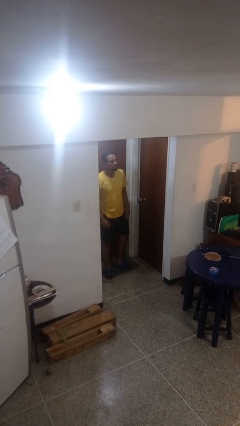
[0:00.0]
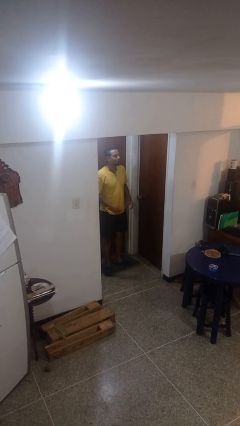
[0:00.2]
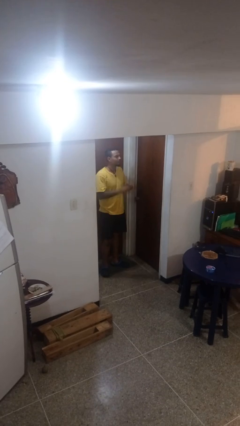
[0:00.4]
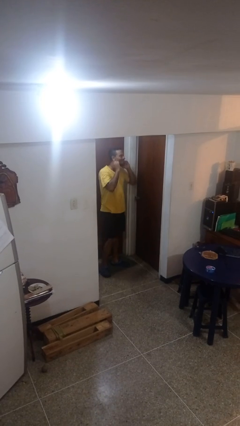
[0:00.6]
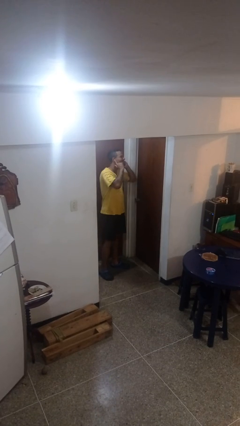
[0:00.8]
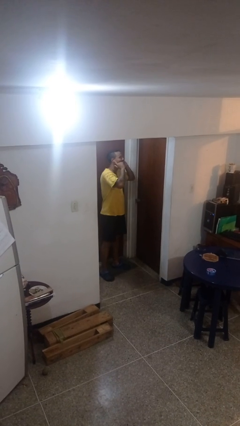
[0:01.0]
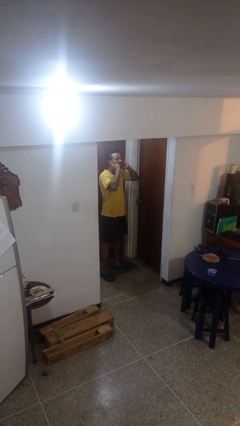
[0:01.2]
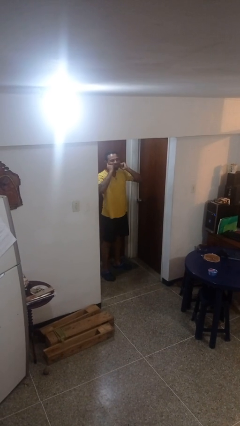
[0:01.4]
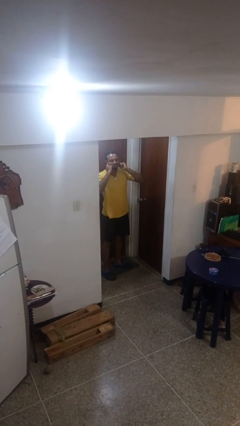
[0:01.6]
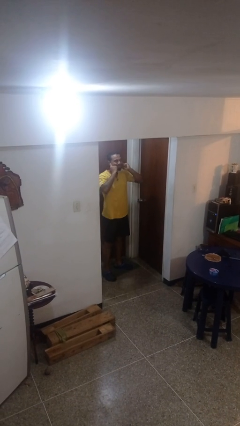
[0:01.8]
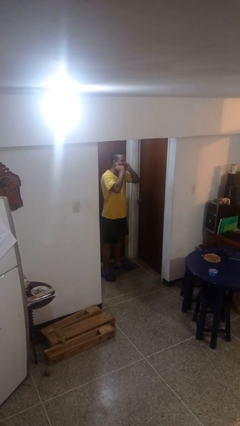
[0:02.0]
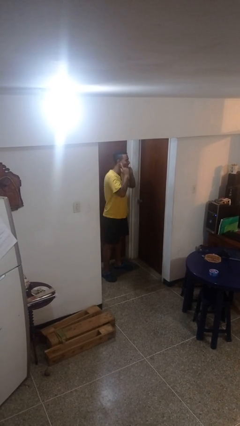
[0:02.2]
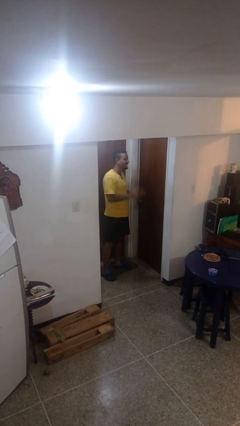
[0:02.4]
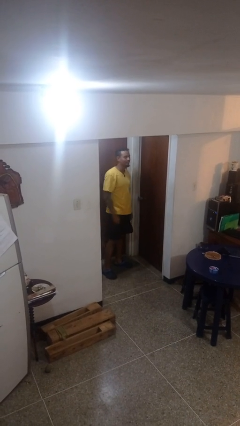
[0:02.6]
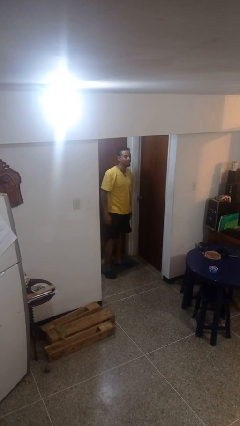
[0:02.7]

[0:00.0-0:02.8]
person puts fingers in ear

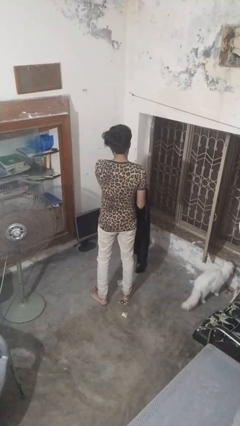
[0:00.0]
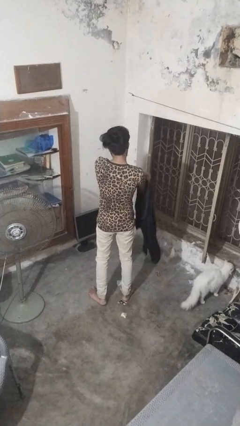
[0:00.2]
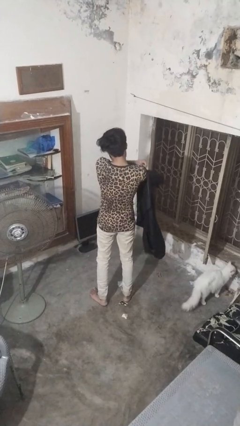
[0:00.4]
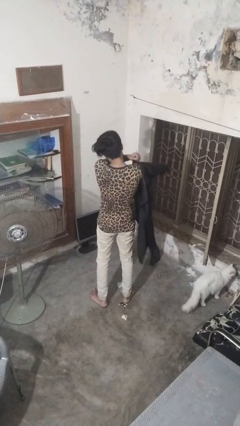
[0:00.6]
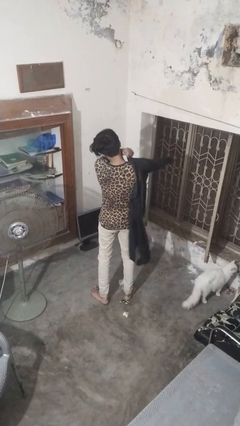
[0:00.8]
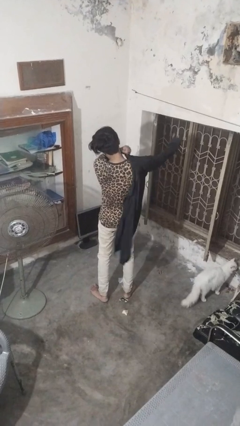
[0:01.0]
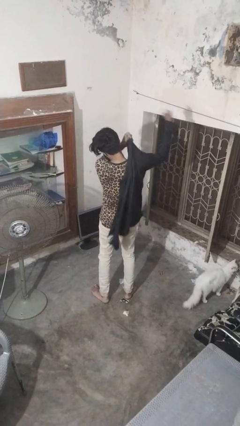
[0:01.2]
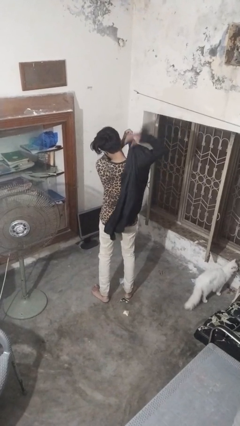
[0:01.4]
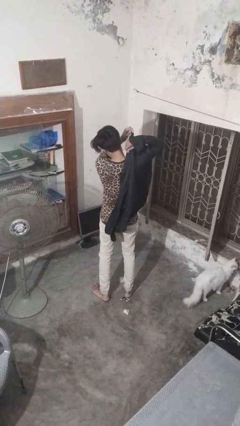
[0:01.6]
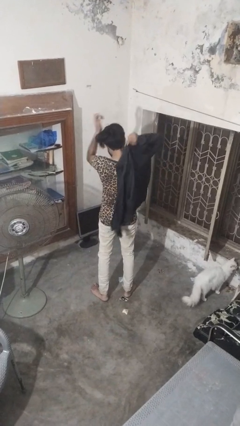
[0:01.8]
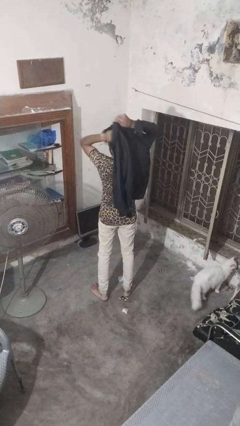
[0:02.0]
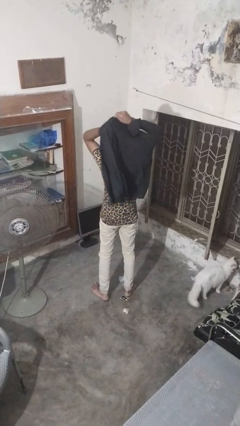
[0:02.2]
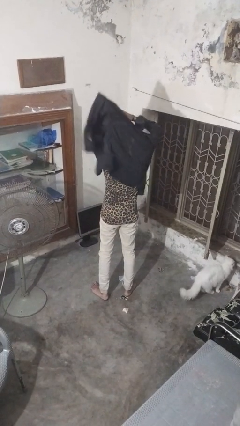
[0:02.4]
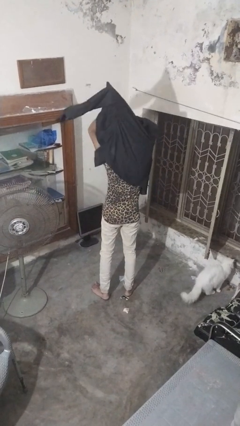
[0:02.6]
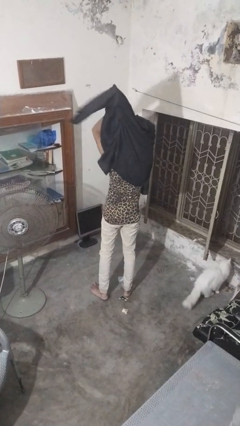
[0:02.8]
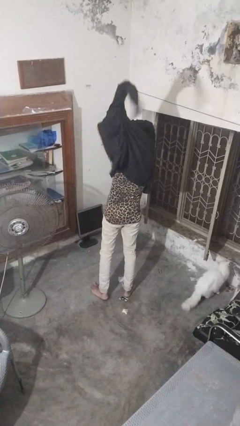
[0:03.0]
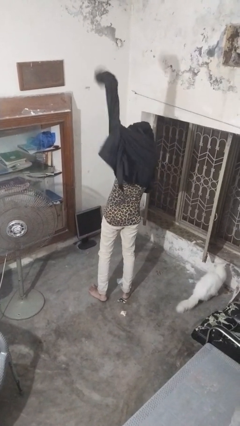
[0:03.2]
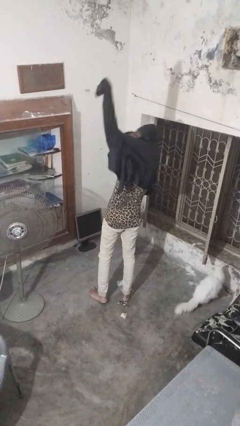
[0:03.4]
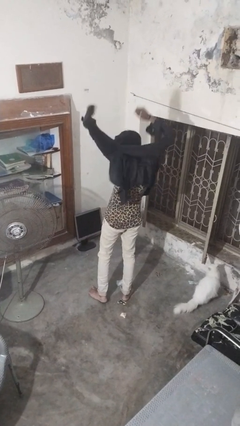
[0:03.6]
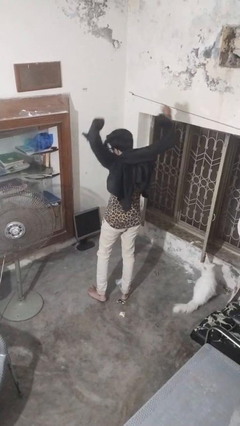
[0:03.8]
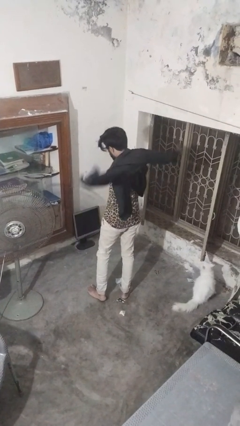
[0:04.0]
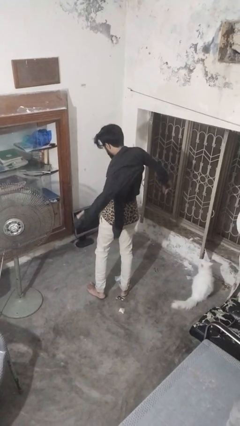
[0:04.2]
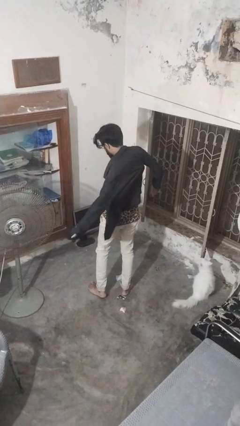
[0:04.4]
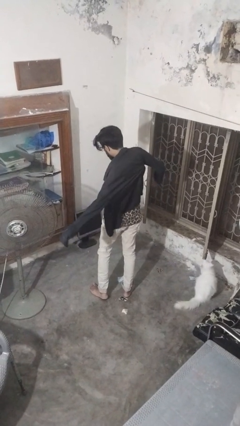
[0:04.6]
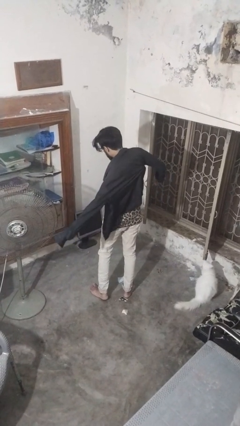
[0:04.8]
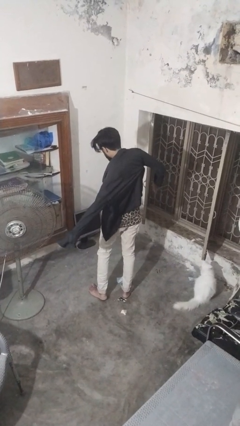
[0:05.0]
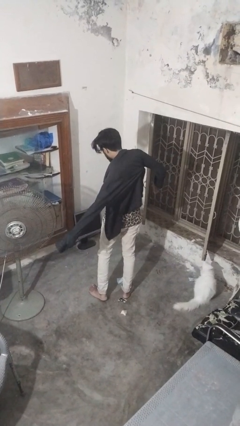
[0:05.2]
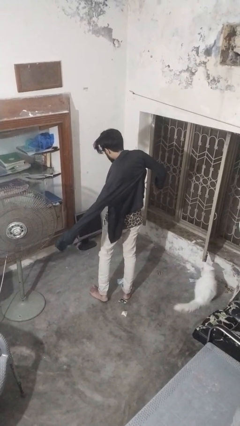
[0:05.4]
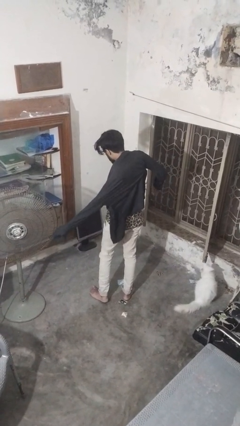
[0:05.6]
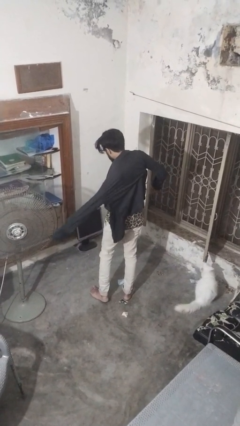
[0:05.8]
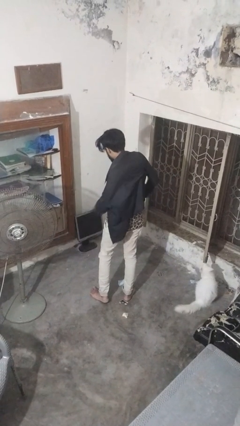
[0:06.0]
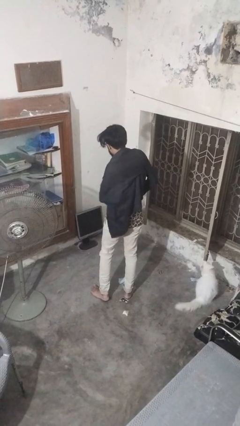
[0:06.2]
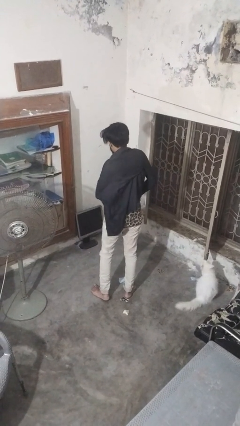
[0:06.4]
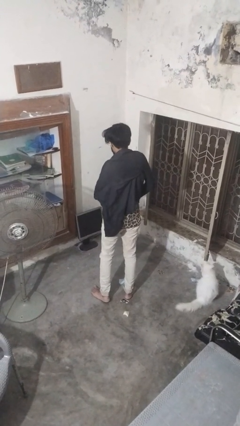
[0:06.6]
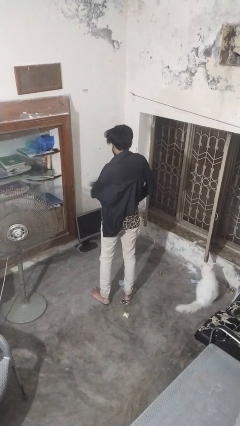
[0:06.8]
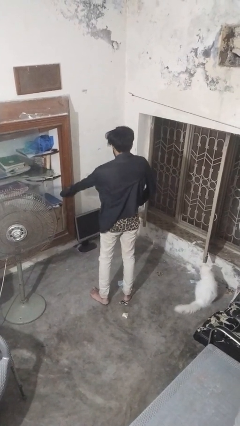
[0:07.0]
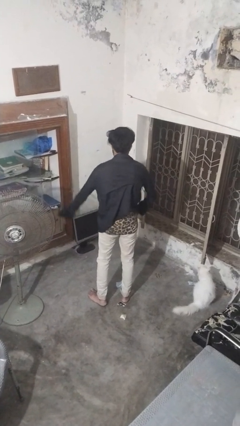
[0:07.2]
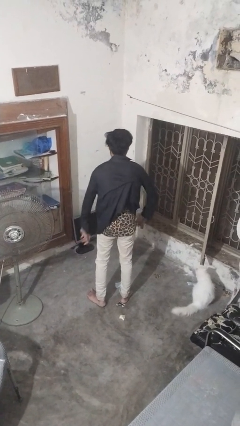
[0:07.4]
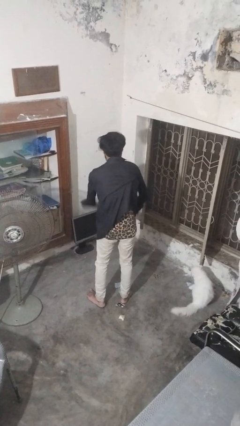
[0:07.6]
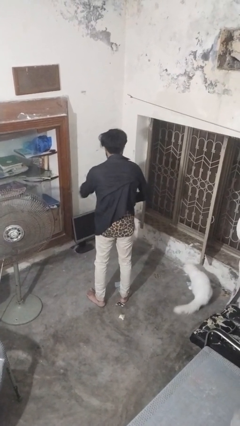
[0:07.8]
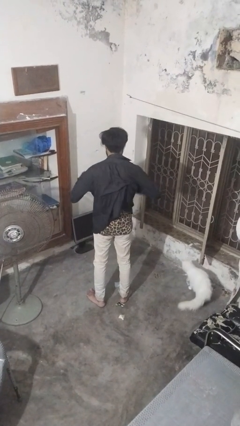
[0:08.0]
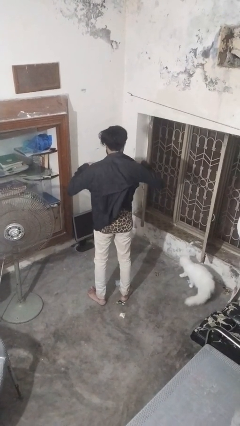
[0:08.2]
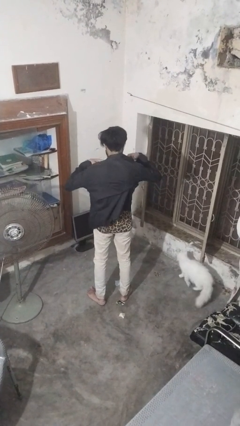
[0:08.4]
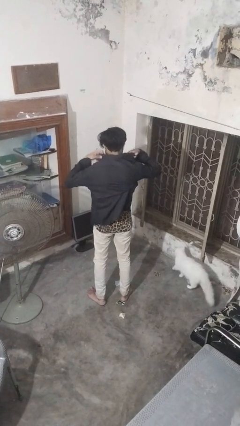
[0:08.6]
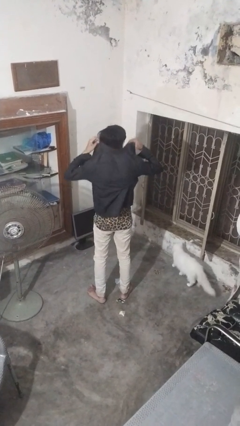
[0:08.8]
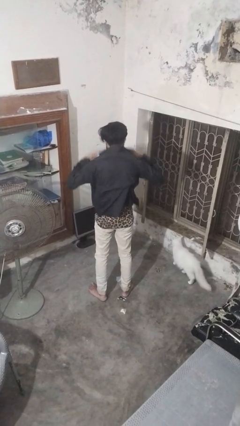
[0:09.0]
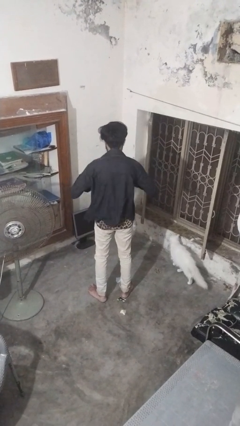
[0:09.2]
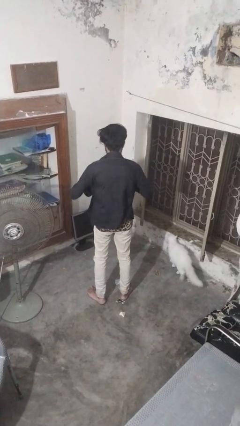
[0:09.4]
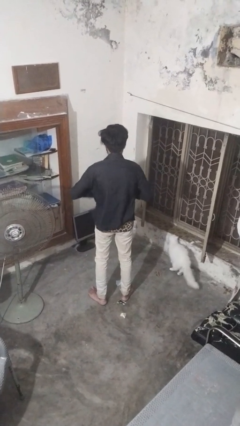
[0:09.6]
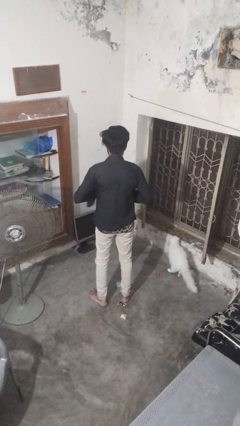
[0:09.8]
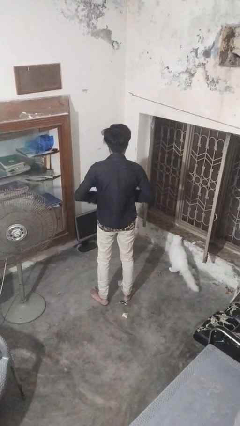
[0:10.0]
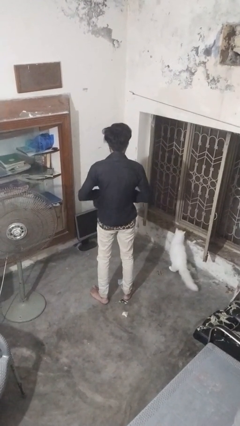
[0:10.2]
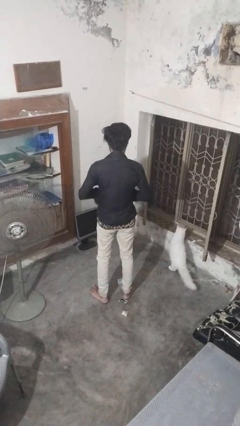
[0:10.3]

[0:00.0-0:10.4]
person puts on shirt

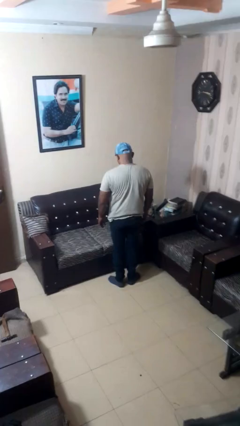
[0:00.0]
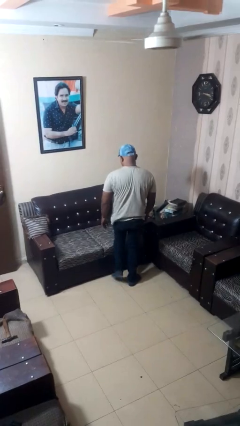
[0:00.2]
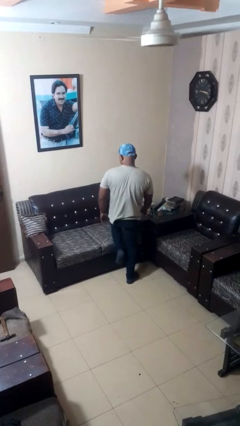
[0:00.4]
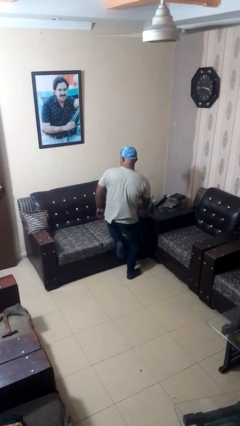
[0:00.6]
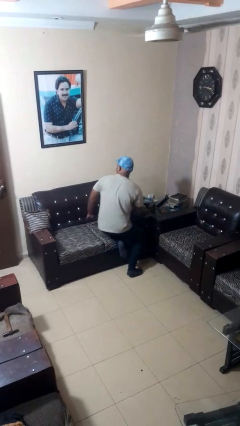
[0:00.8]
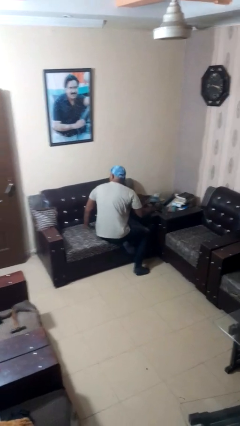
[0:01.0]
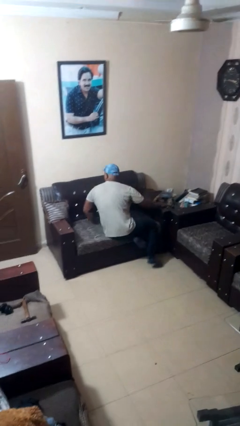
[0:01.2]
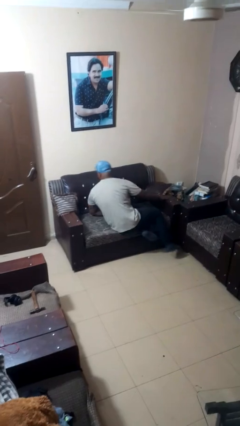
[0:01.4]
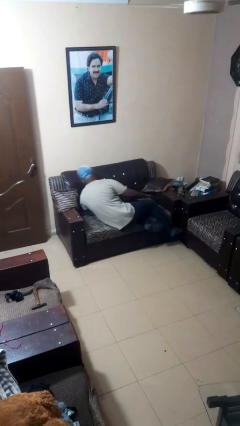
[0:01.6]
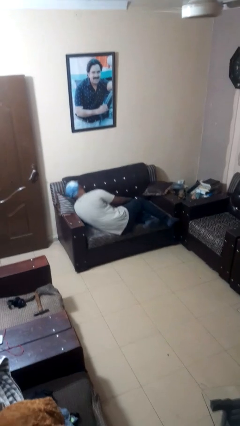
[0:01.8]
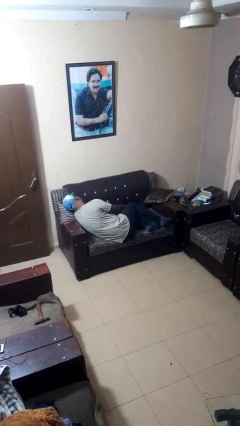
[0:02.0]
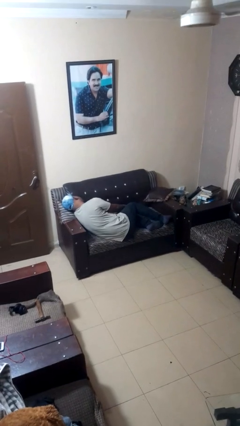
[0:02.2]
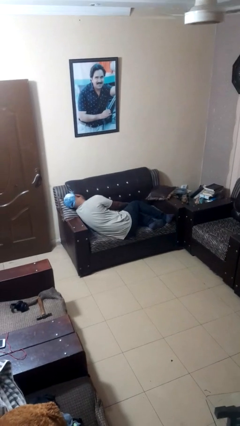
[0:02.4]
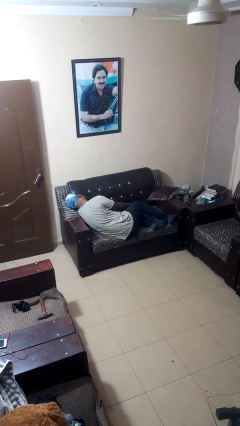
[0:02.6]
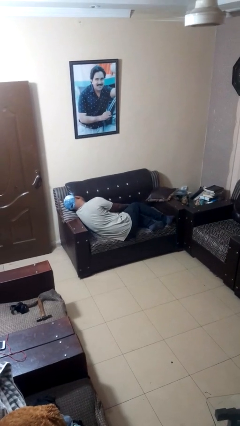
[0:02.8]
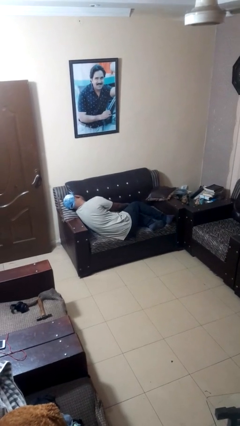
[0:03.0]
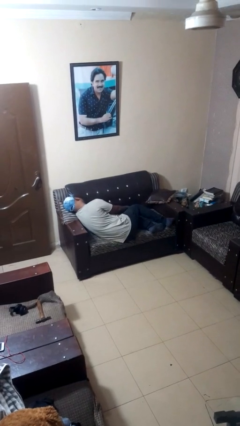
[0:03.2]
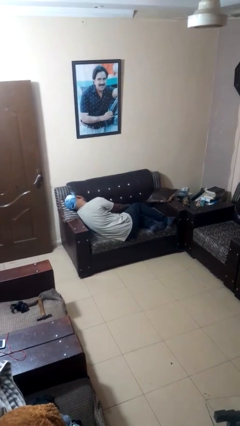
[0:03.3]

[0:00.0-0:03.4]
person lies down on couch

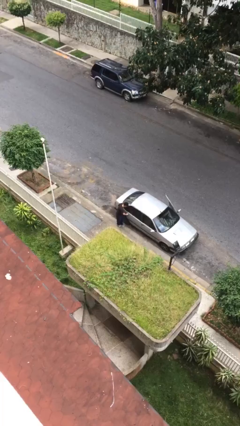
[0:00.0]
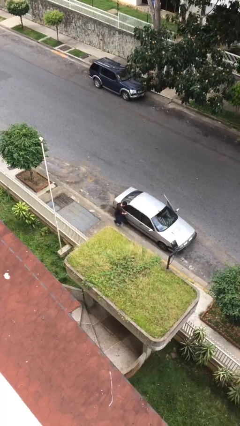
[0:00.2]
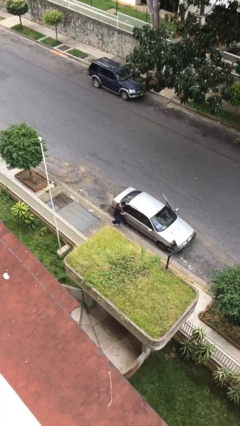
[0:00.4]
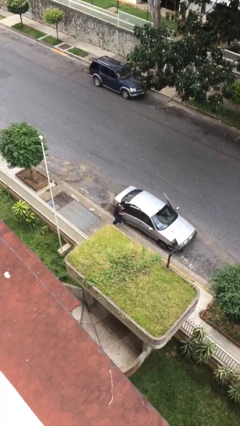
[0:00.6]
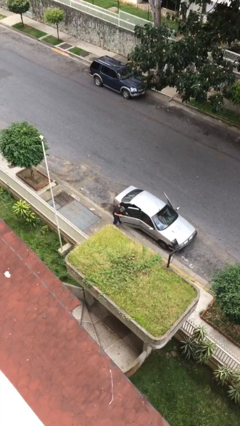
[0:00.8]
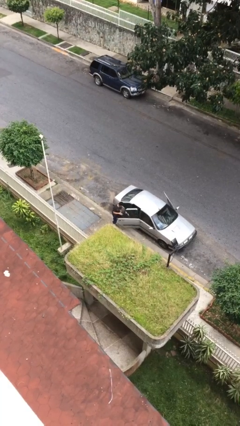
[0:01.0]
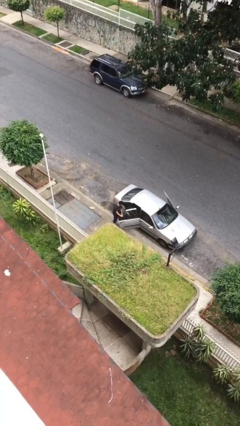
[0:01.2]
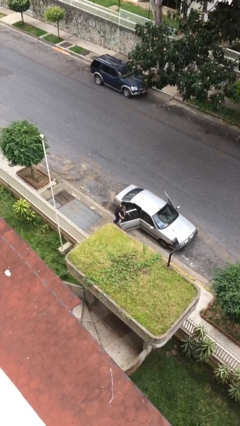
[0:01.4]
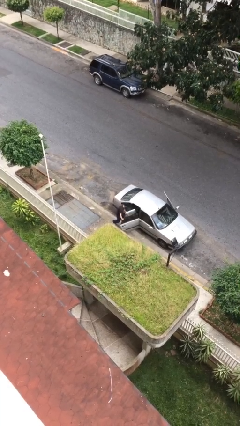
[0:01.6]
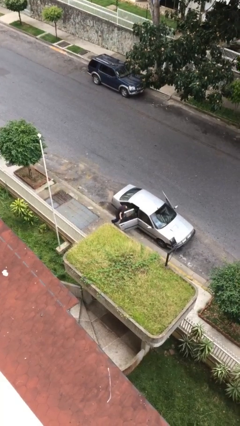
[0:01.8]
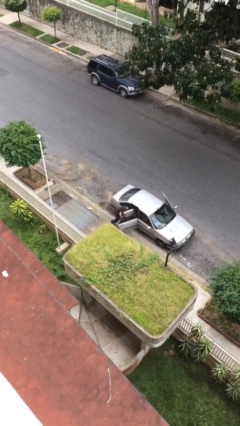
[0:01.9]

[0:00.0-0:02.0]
person opens car door
